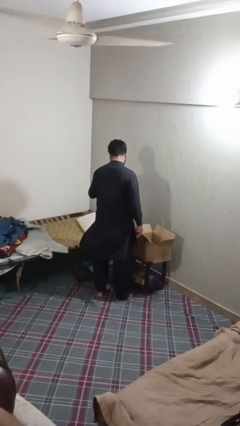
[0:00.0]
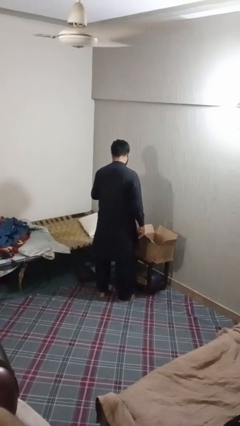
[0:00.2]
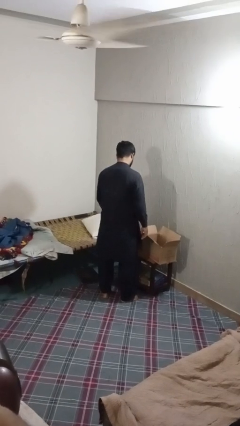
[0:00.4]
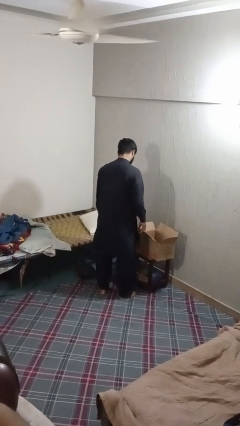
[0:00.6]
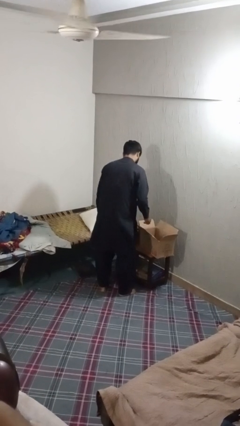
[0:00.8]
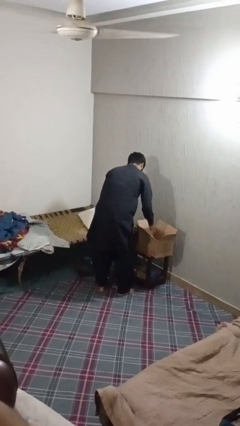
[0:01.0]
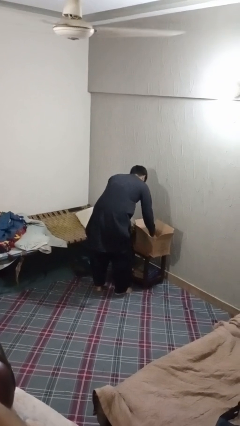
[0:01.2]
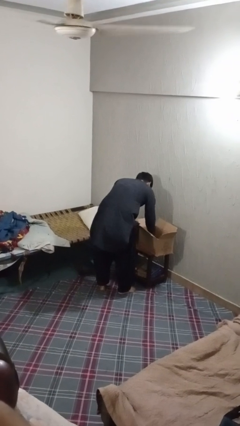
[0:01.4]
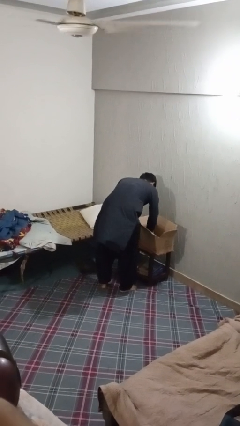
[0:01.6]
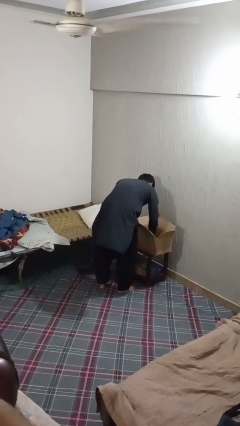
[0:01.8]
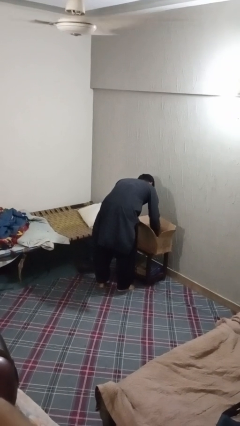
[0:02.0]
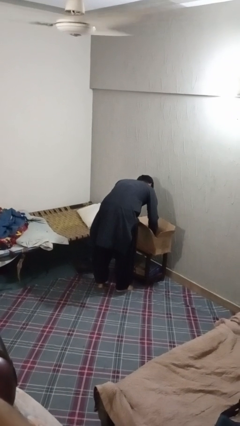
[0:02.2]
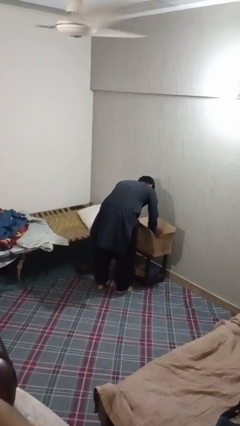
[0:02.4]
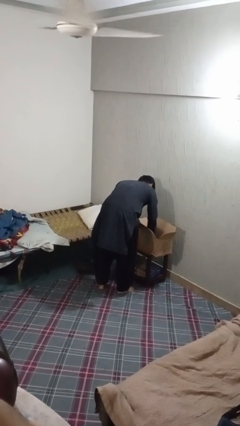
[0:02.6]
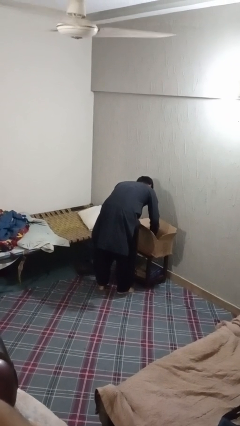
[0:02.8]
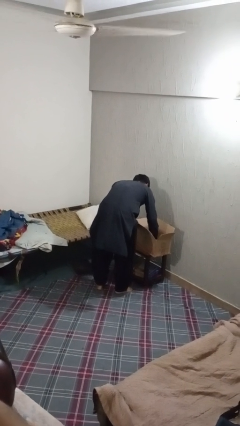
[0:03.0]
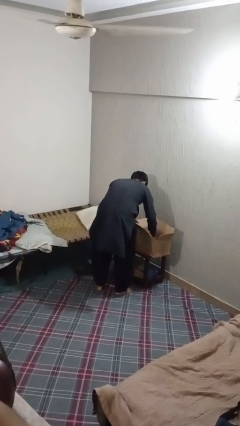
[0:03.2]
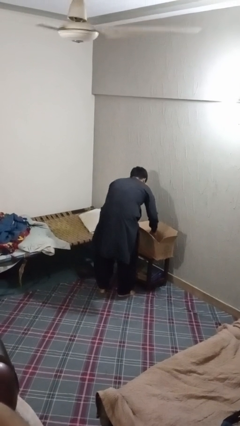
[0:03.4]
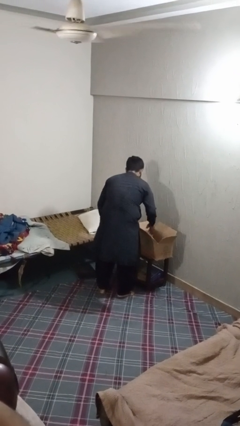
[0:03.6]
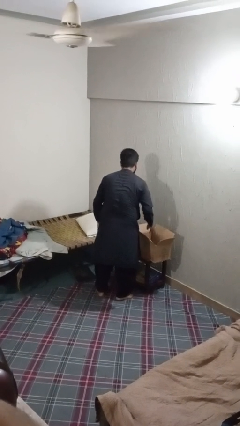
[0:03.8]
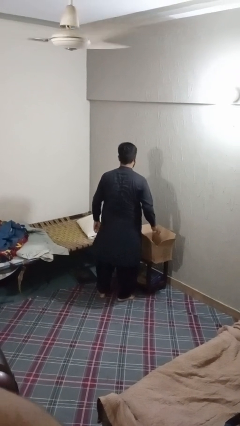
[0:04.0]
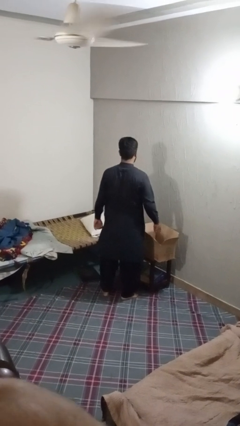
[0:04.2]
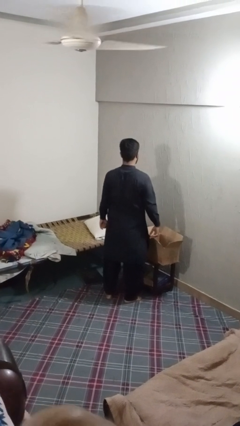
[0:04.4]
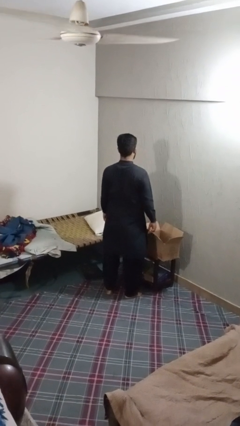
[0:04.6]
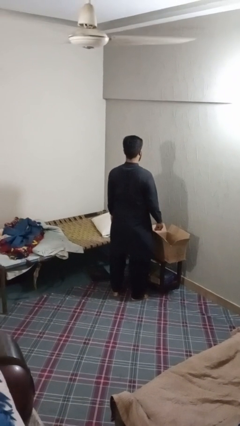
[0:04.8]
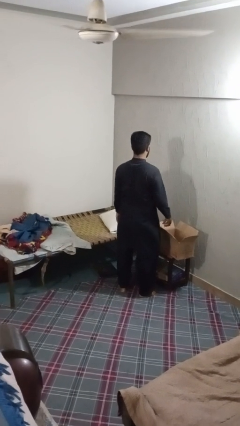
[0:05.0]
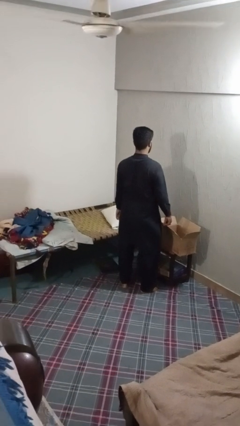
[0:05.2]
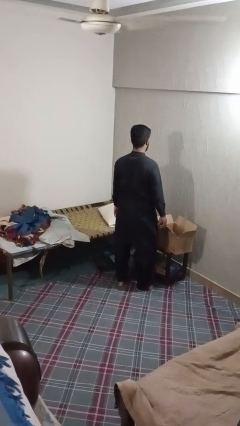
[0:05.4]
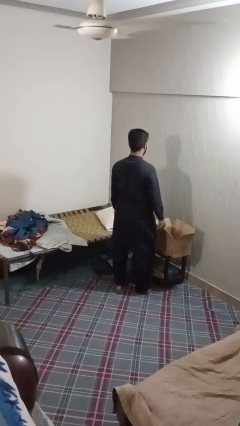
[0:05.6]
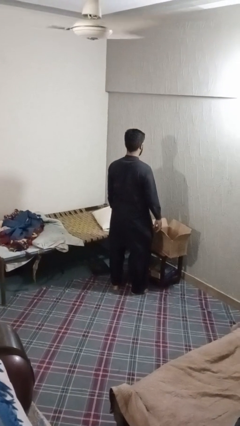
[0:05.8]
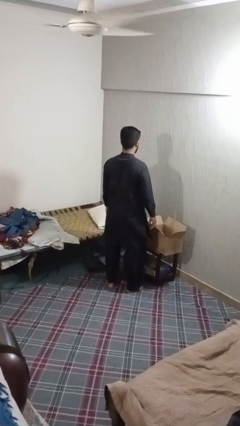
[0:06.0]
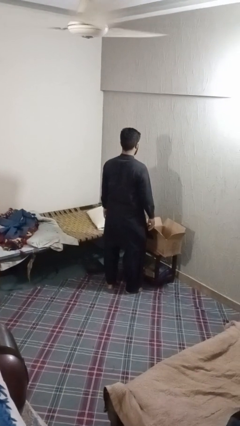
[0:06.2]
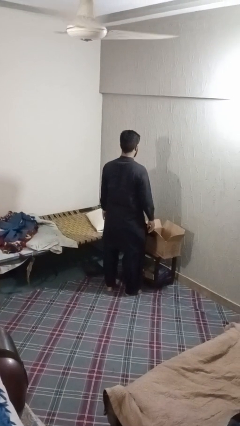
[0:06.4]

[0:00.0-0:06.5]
person searches in box

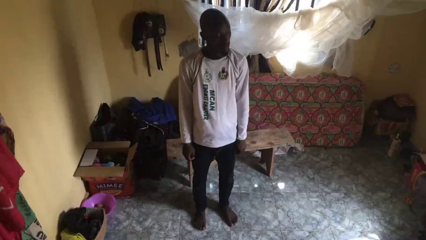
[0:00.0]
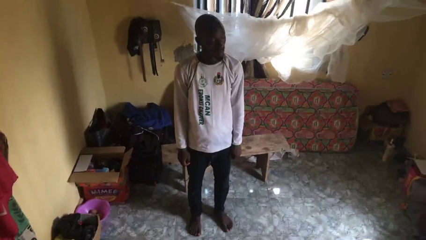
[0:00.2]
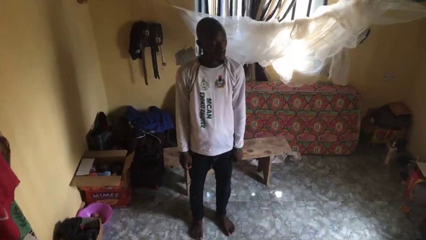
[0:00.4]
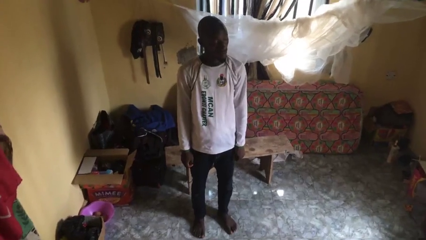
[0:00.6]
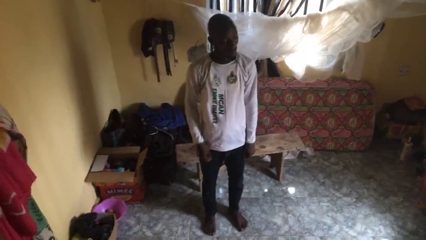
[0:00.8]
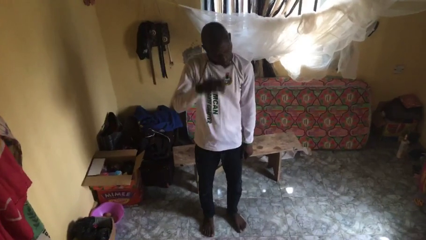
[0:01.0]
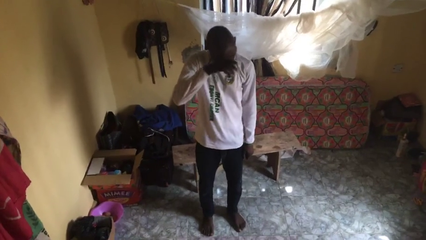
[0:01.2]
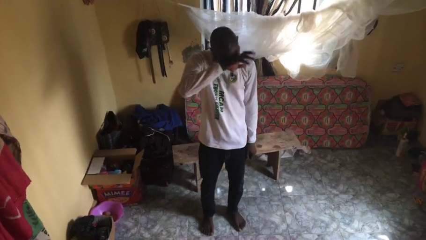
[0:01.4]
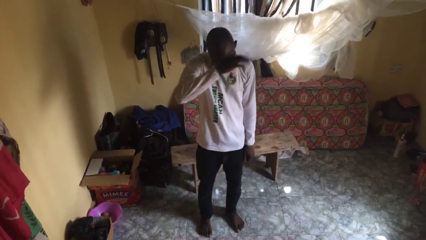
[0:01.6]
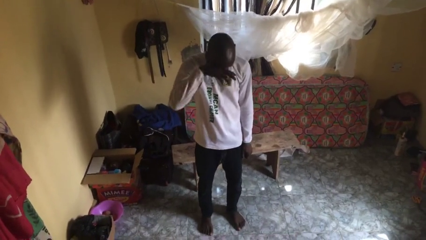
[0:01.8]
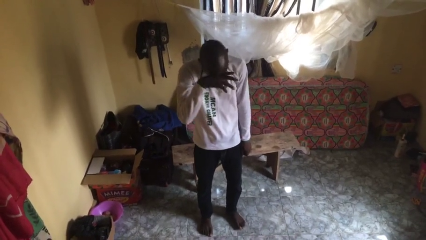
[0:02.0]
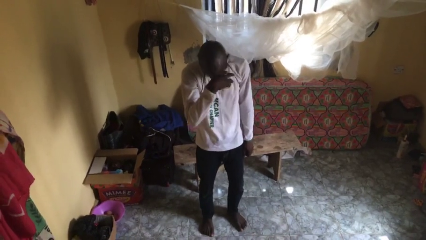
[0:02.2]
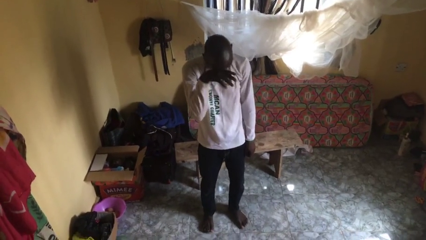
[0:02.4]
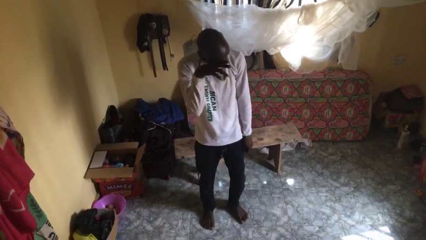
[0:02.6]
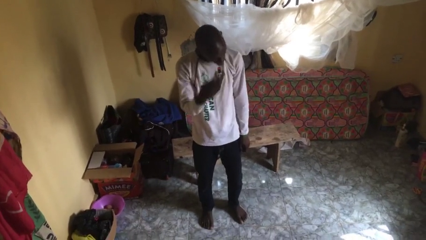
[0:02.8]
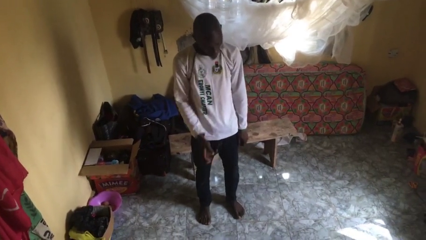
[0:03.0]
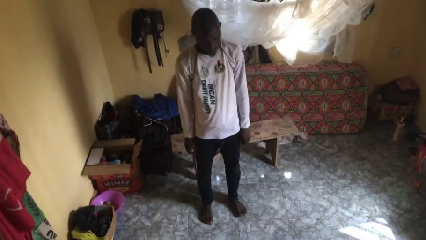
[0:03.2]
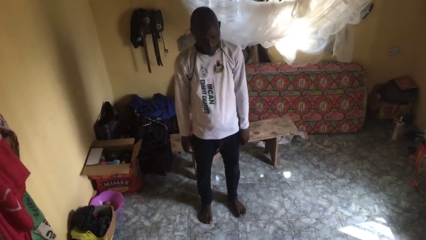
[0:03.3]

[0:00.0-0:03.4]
person rubs eyes

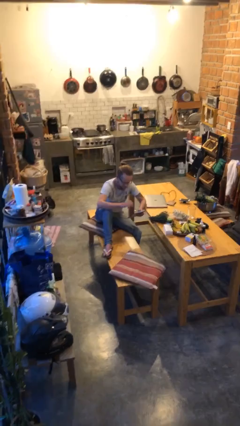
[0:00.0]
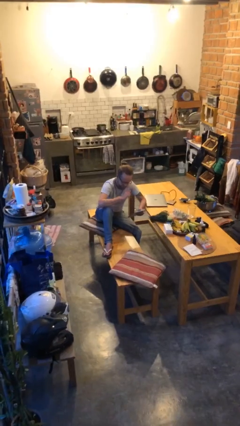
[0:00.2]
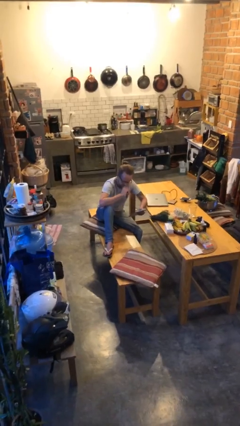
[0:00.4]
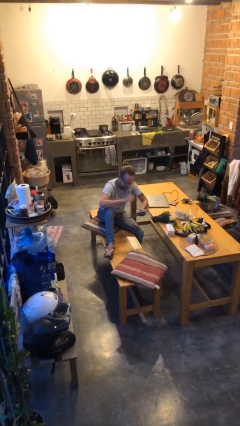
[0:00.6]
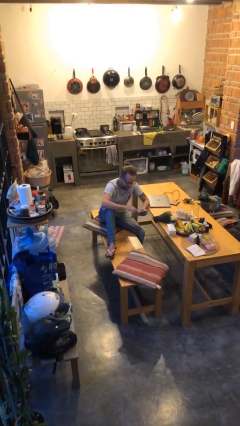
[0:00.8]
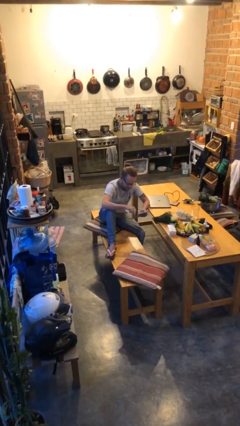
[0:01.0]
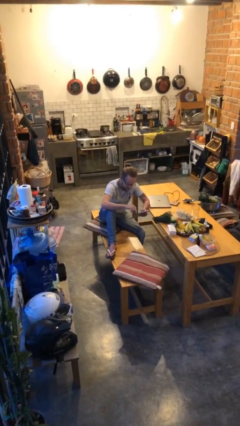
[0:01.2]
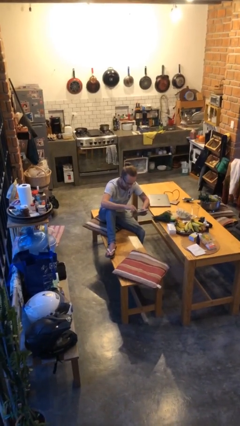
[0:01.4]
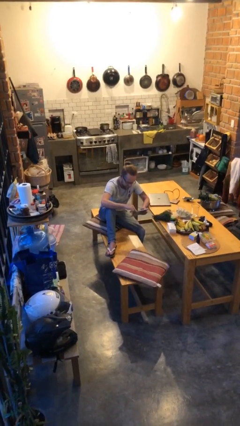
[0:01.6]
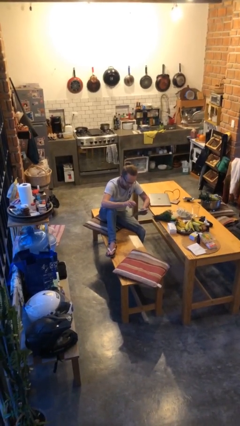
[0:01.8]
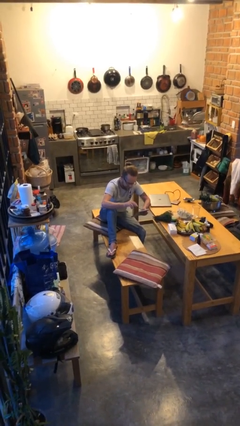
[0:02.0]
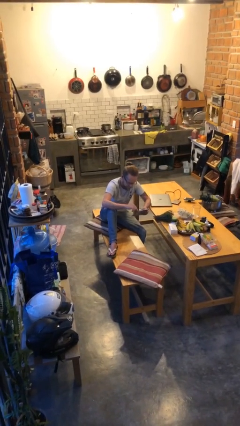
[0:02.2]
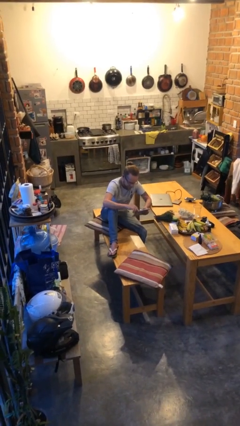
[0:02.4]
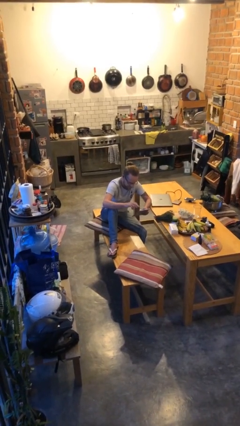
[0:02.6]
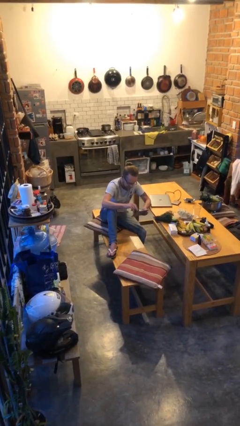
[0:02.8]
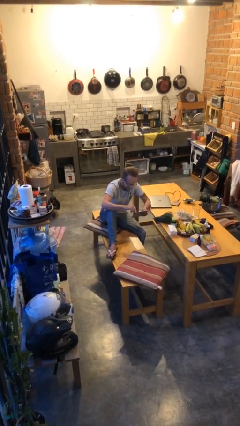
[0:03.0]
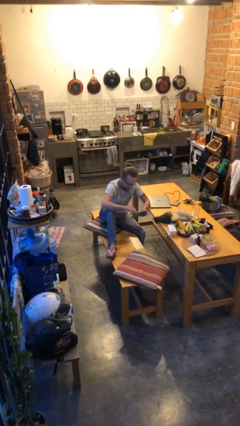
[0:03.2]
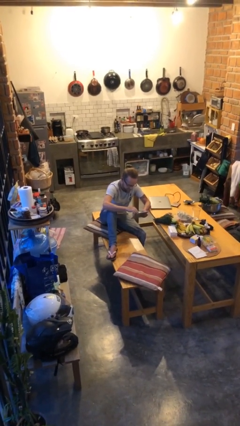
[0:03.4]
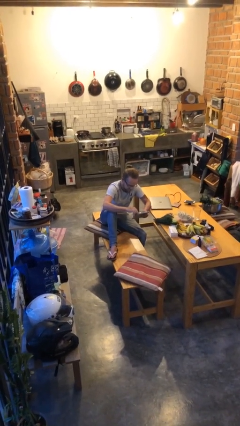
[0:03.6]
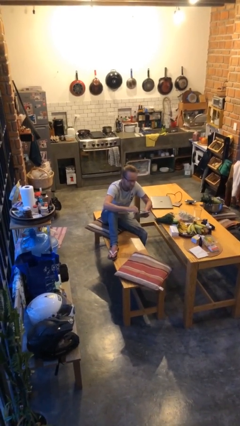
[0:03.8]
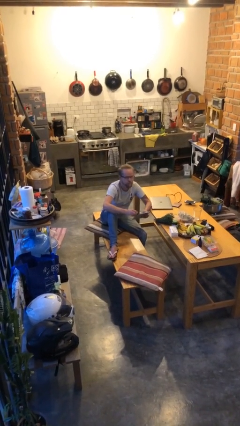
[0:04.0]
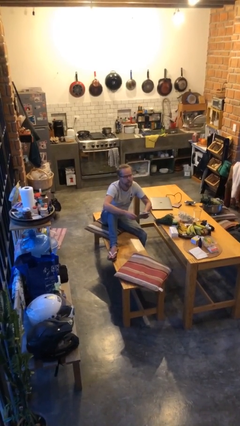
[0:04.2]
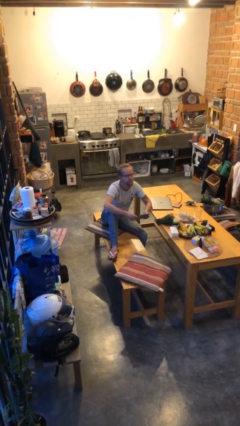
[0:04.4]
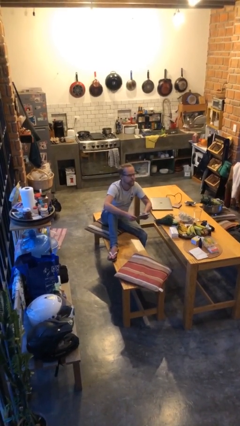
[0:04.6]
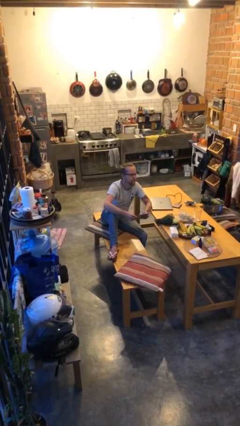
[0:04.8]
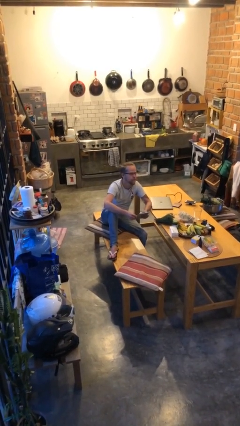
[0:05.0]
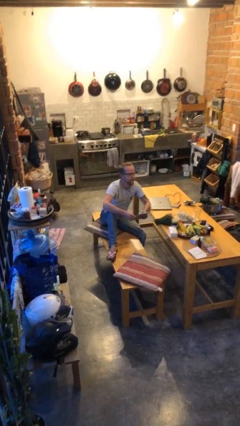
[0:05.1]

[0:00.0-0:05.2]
person interacts with tablet

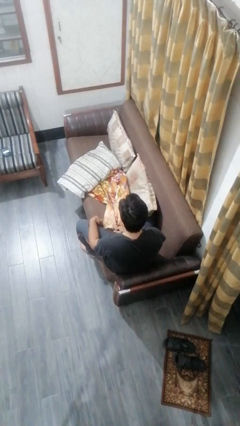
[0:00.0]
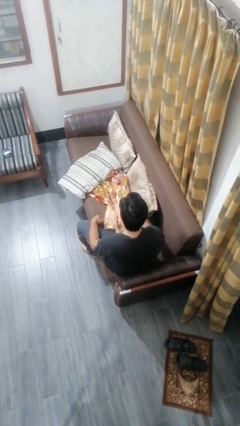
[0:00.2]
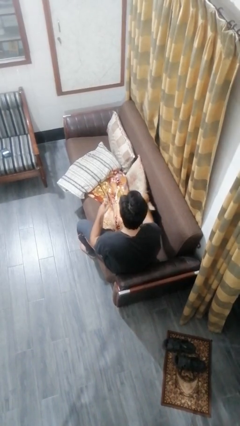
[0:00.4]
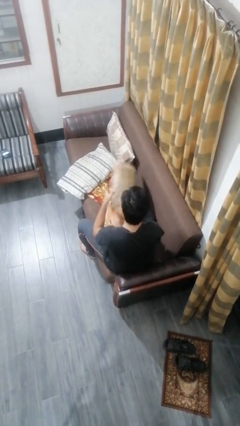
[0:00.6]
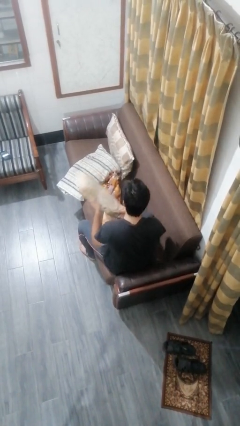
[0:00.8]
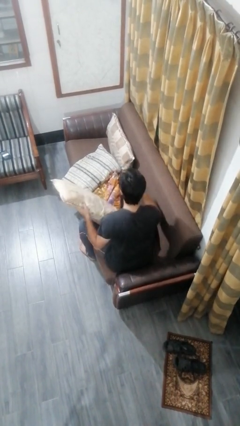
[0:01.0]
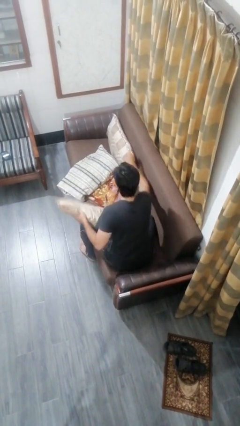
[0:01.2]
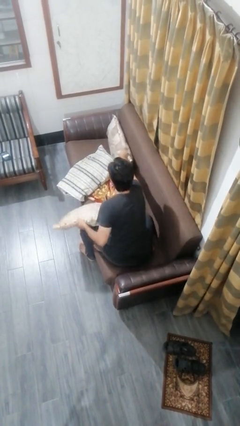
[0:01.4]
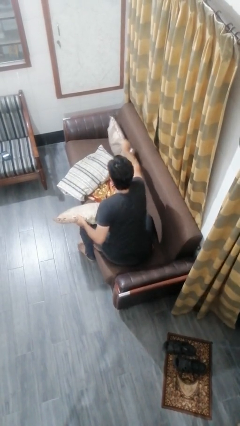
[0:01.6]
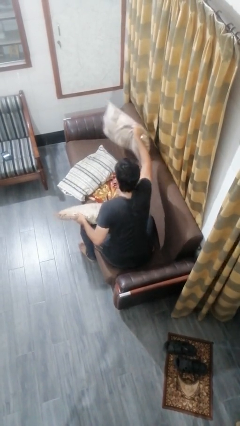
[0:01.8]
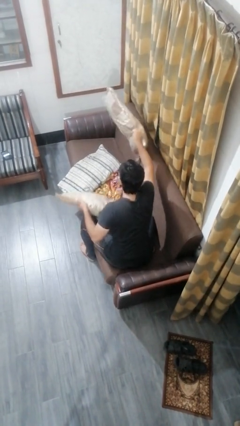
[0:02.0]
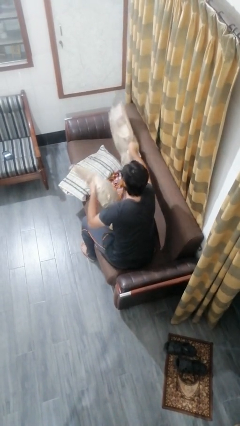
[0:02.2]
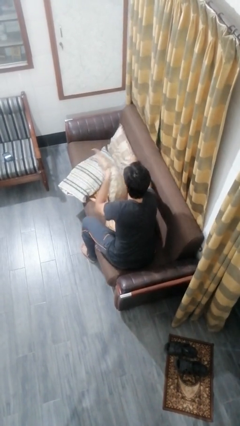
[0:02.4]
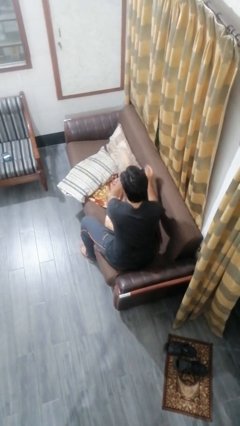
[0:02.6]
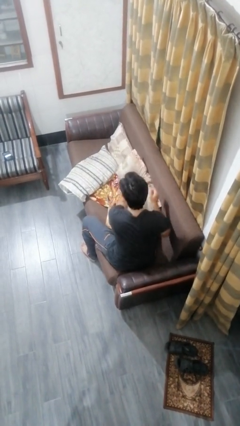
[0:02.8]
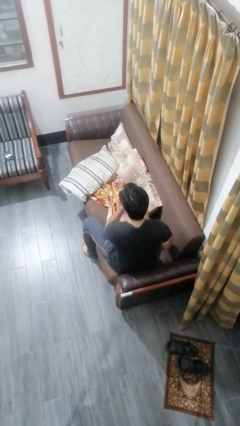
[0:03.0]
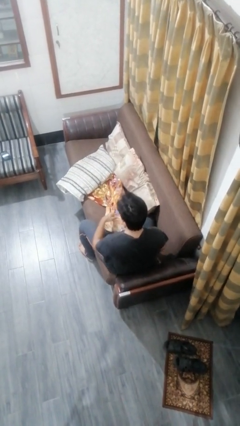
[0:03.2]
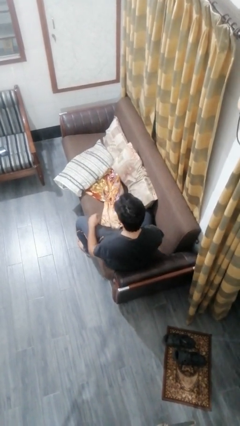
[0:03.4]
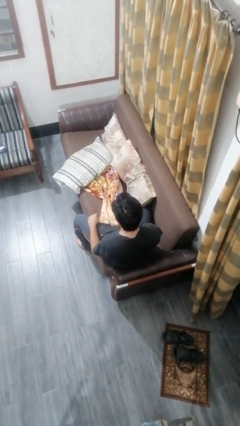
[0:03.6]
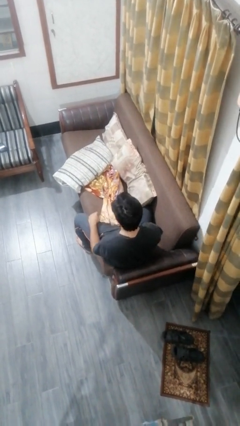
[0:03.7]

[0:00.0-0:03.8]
person searches in couch
